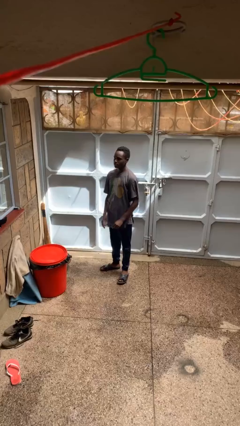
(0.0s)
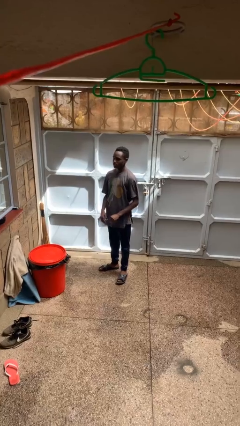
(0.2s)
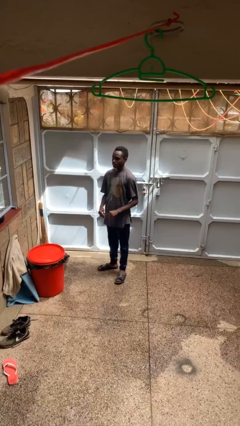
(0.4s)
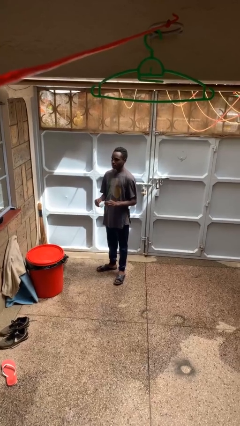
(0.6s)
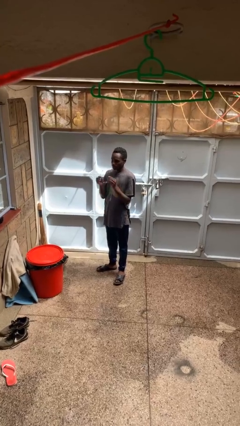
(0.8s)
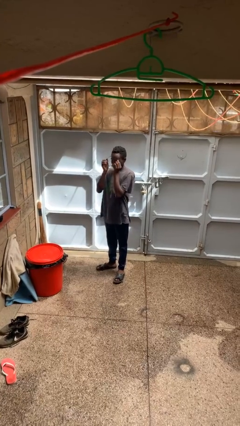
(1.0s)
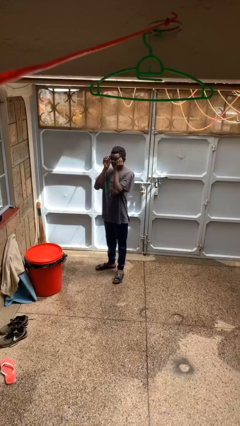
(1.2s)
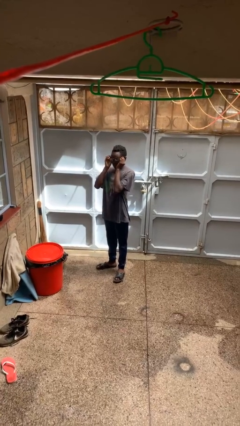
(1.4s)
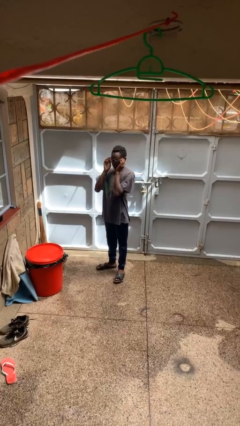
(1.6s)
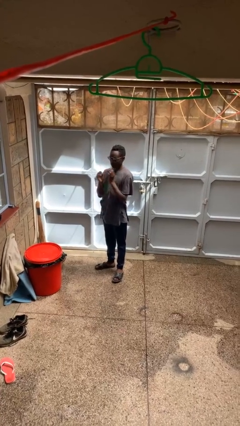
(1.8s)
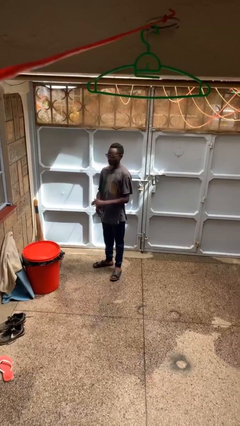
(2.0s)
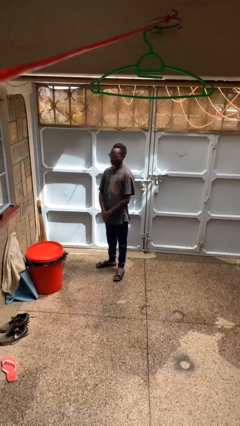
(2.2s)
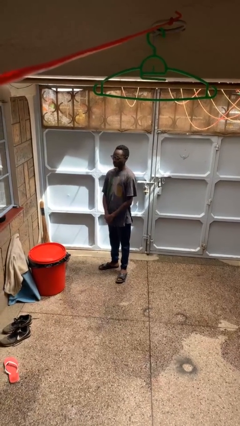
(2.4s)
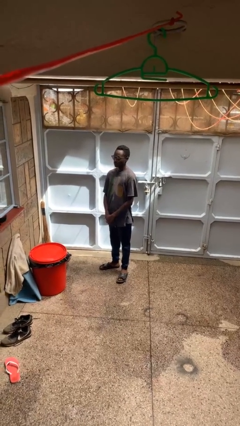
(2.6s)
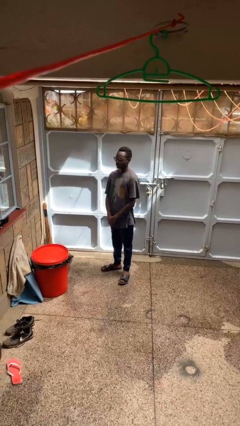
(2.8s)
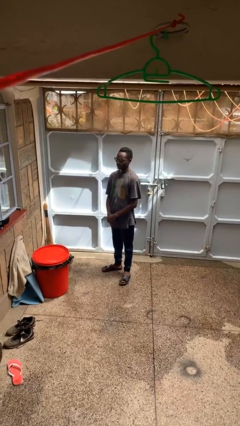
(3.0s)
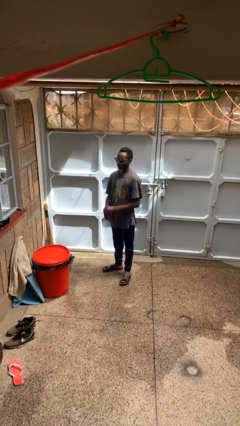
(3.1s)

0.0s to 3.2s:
person puts on glasses

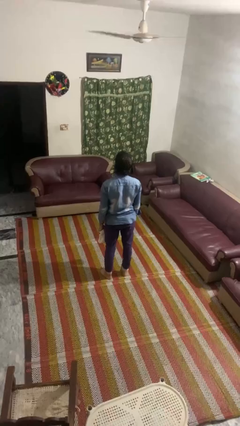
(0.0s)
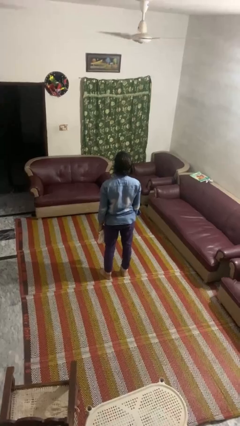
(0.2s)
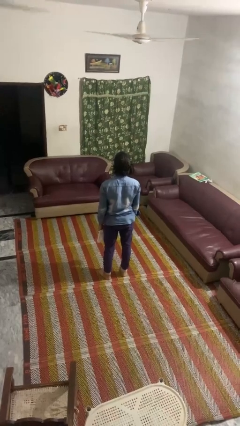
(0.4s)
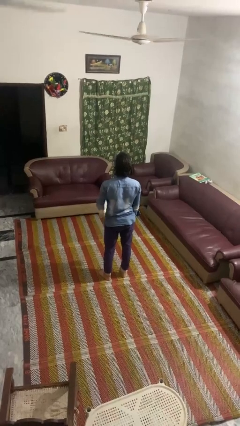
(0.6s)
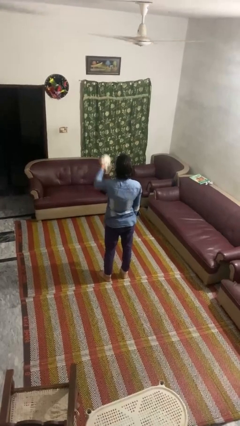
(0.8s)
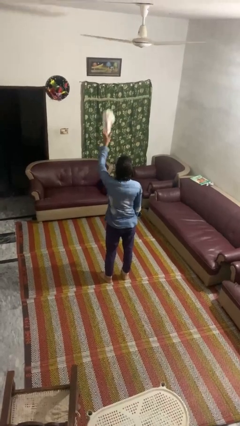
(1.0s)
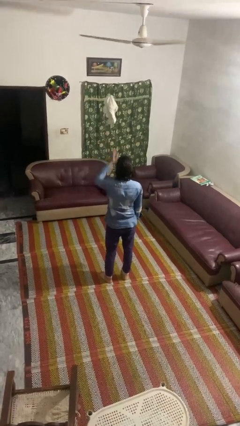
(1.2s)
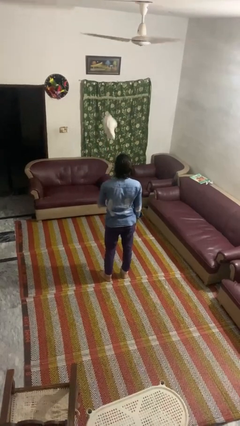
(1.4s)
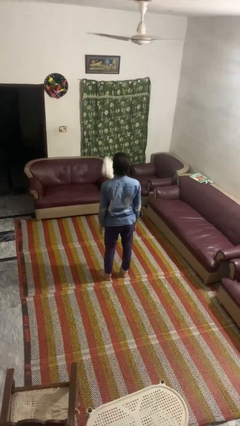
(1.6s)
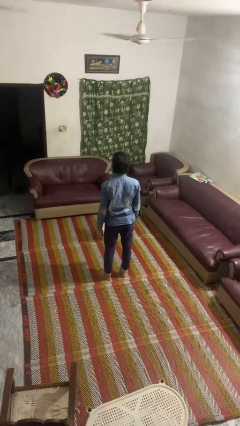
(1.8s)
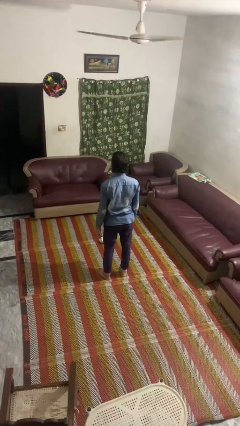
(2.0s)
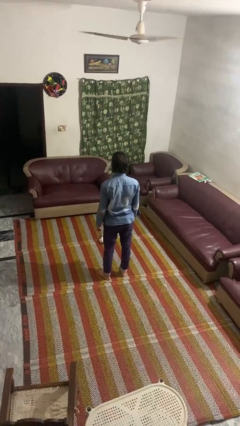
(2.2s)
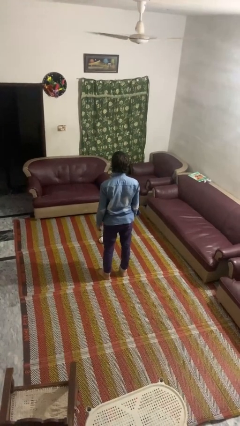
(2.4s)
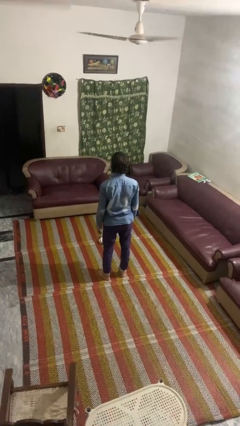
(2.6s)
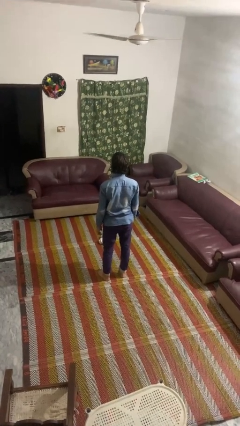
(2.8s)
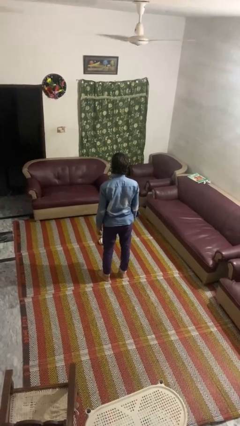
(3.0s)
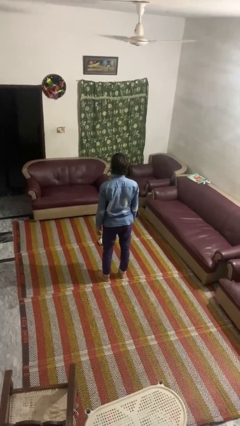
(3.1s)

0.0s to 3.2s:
person throws object into air

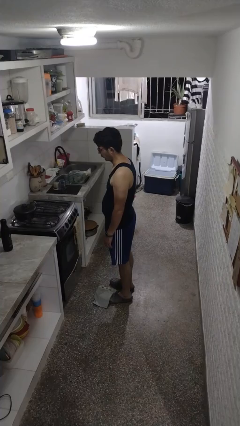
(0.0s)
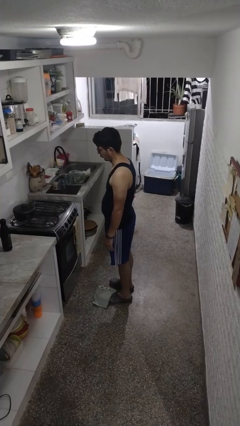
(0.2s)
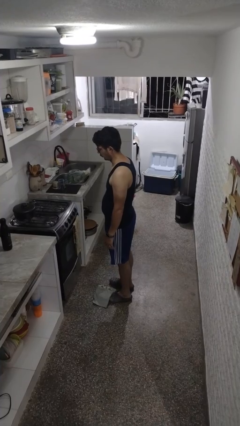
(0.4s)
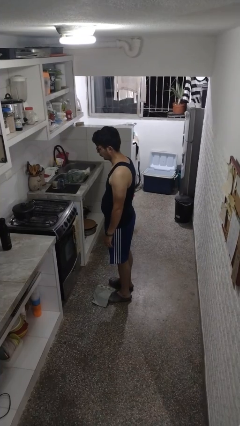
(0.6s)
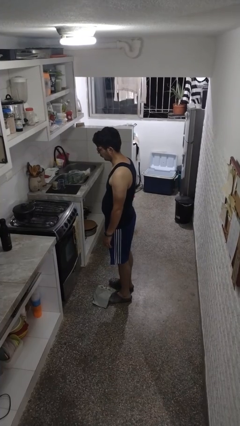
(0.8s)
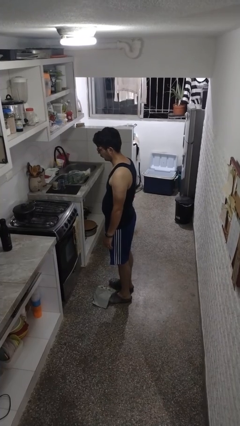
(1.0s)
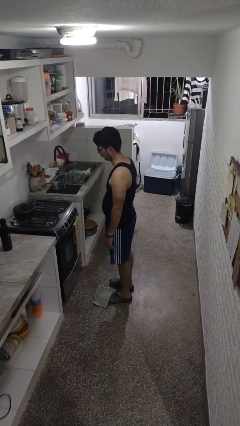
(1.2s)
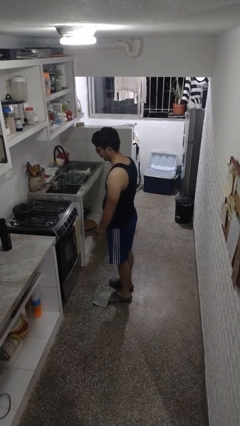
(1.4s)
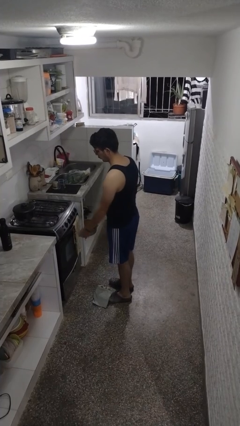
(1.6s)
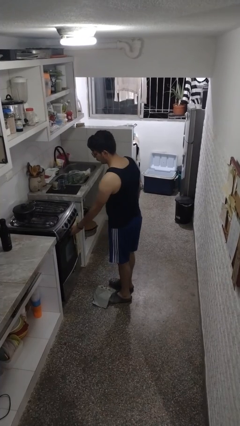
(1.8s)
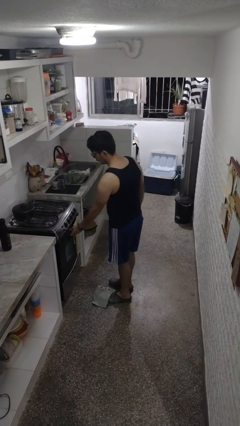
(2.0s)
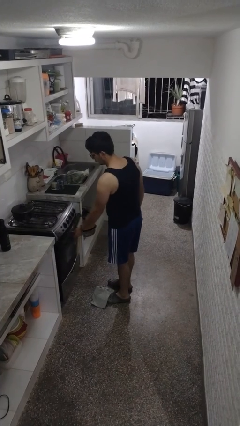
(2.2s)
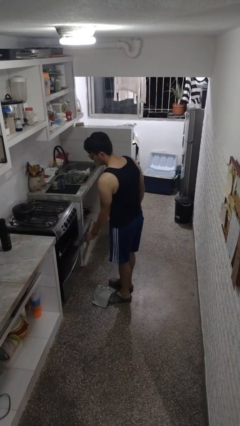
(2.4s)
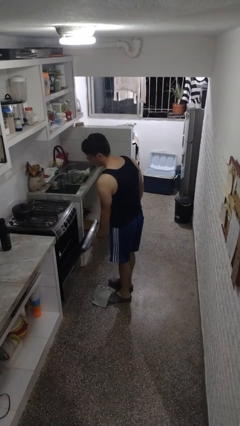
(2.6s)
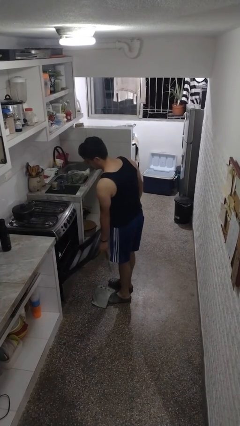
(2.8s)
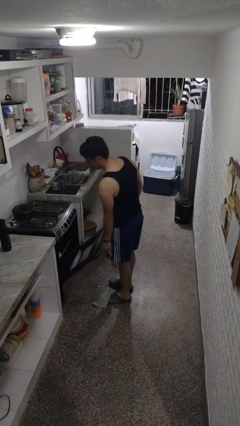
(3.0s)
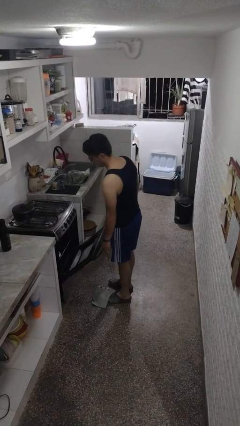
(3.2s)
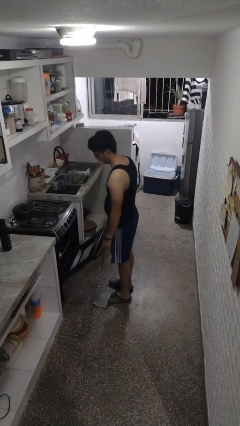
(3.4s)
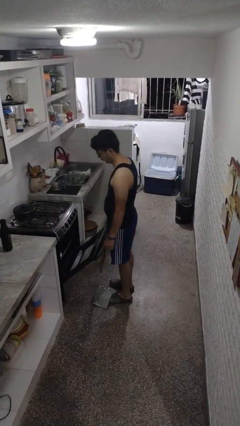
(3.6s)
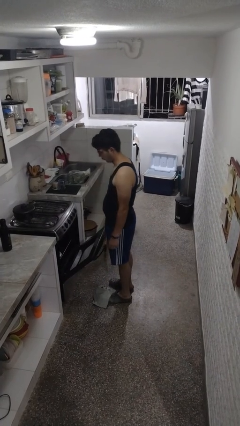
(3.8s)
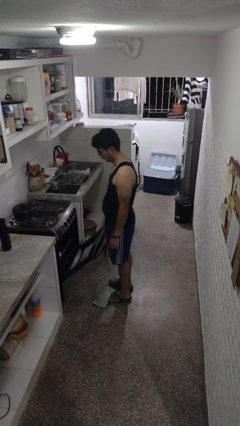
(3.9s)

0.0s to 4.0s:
person opens oven door

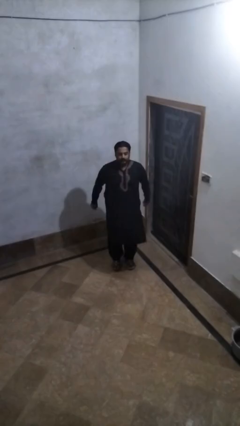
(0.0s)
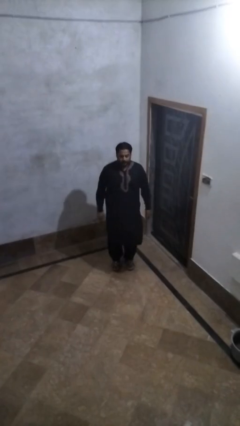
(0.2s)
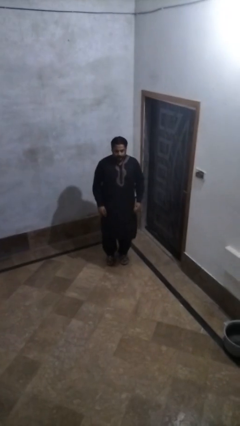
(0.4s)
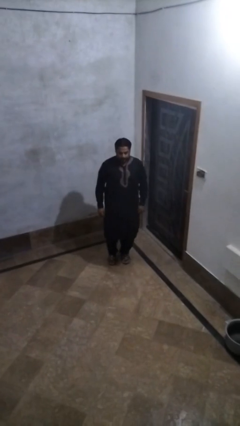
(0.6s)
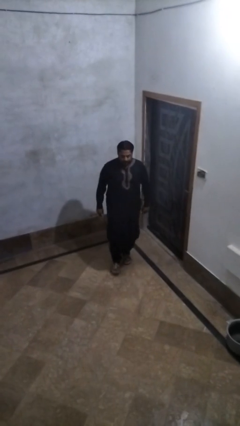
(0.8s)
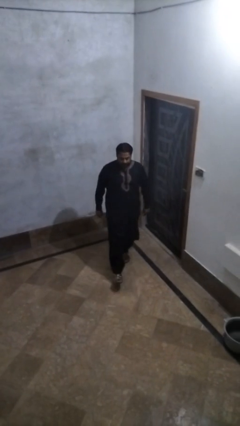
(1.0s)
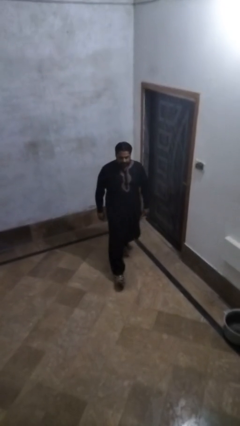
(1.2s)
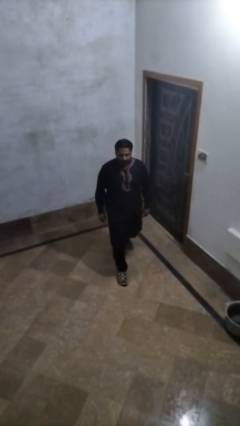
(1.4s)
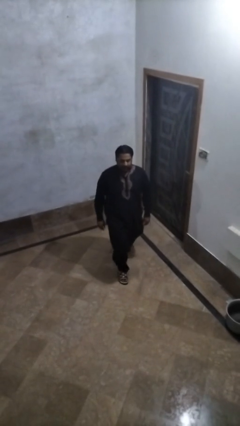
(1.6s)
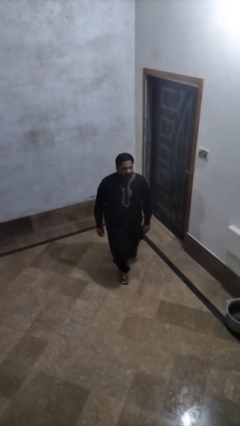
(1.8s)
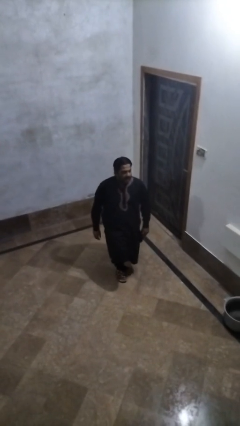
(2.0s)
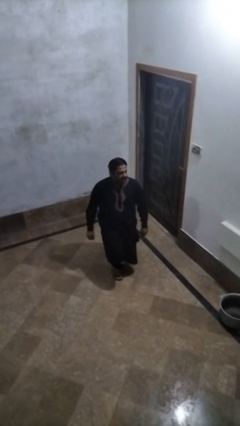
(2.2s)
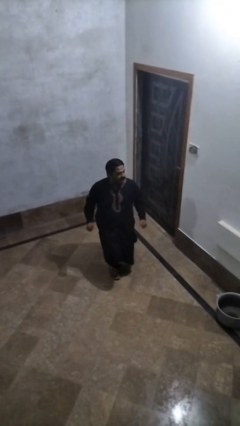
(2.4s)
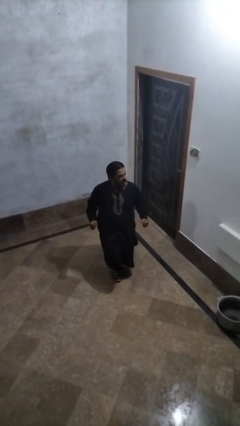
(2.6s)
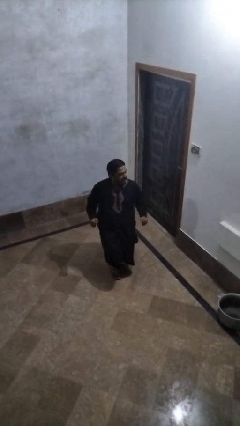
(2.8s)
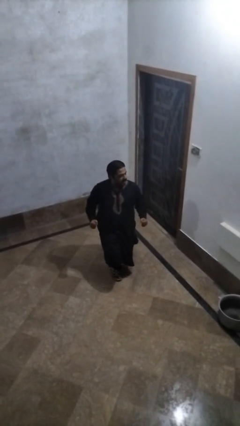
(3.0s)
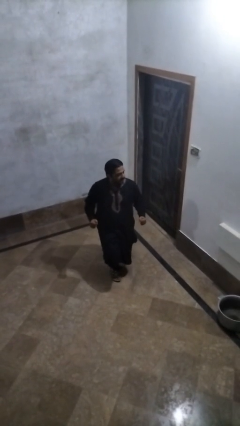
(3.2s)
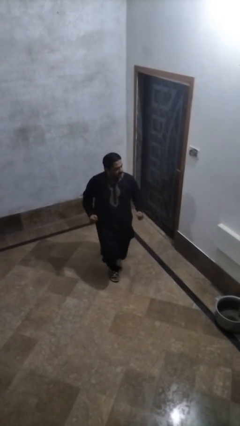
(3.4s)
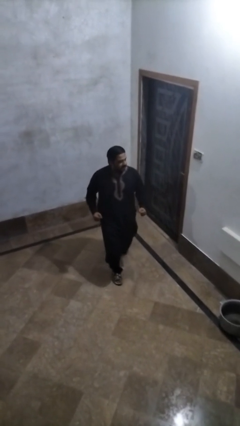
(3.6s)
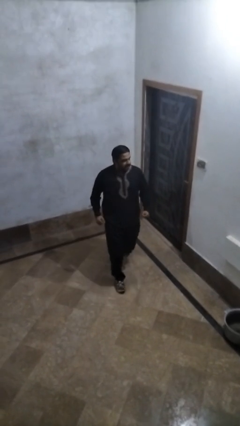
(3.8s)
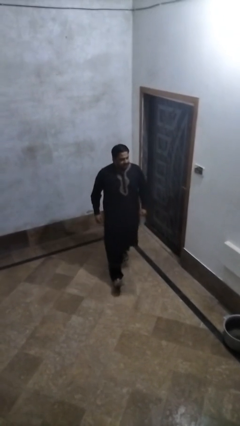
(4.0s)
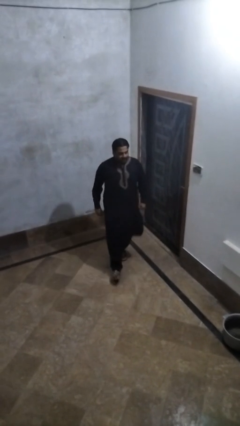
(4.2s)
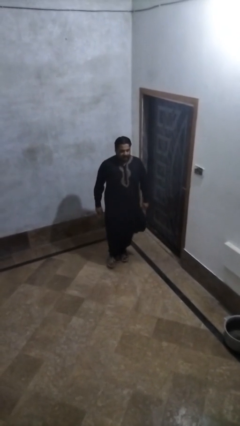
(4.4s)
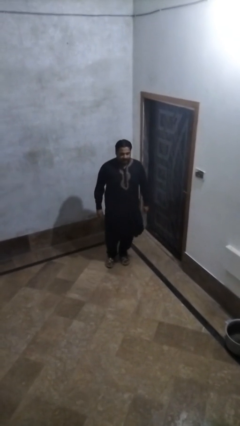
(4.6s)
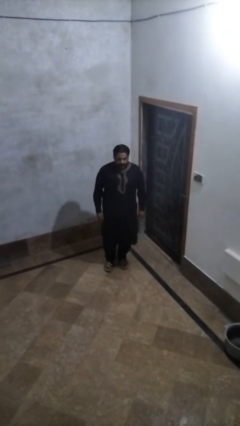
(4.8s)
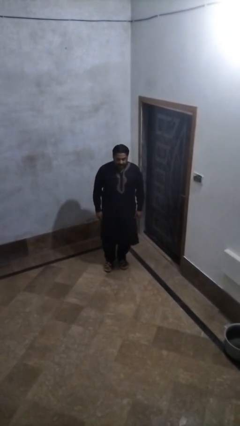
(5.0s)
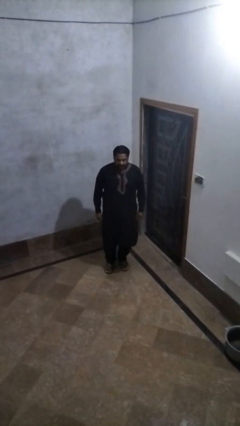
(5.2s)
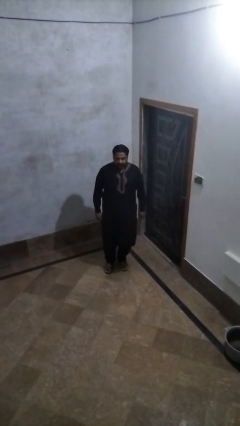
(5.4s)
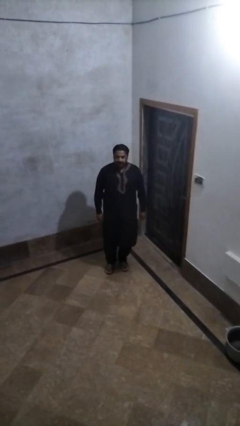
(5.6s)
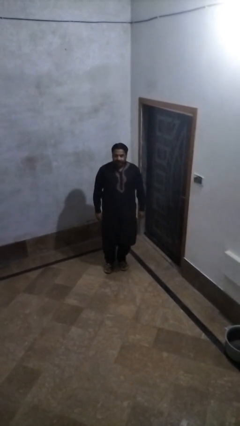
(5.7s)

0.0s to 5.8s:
person exercises with lunges

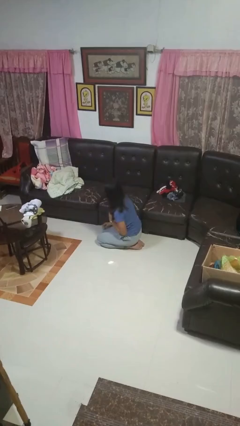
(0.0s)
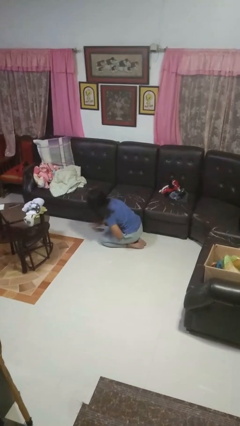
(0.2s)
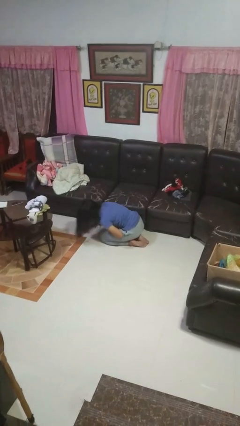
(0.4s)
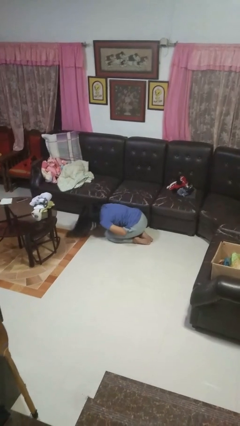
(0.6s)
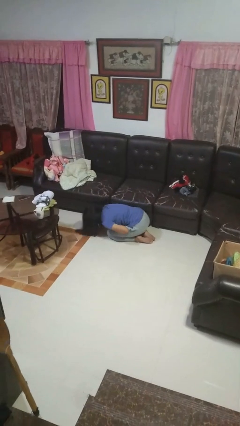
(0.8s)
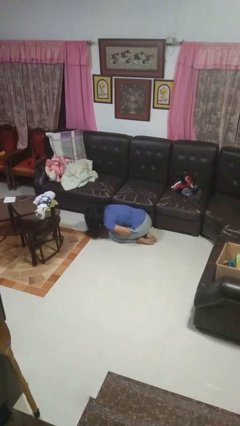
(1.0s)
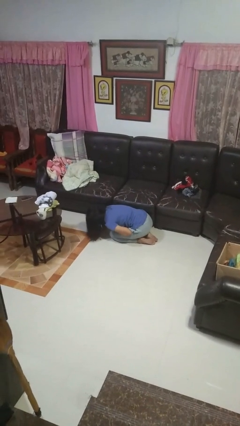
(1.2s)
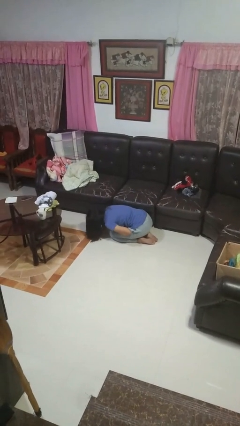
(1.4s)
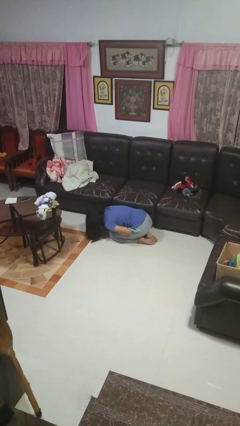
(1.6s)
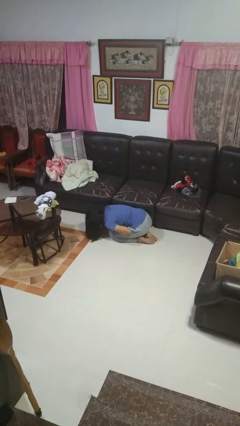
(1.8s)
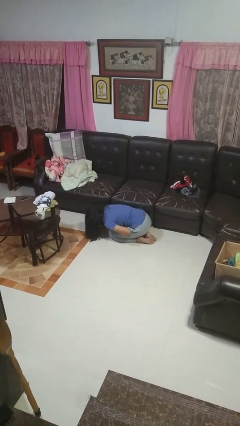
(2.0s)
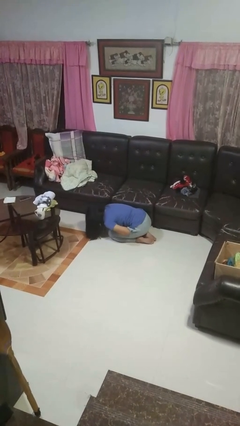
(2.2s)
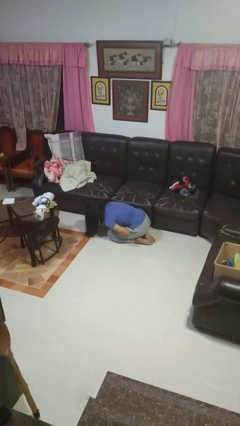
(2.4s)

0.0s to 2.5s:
person searches under couch
